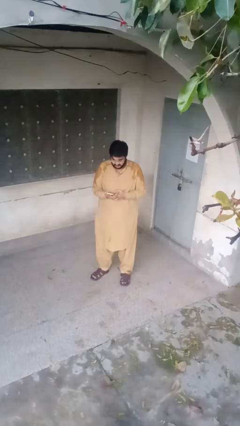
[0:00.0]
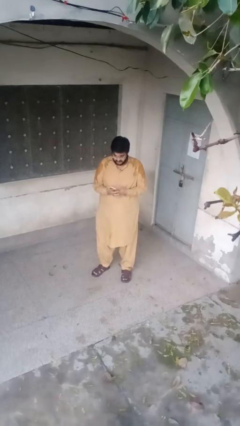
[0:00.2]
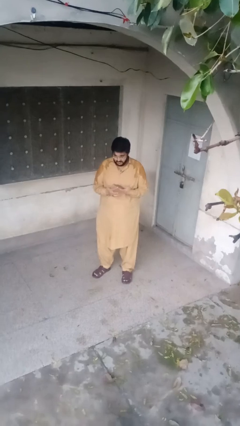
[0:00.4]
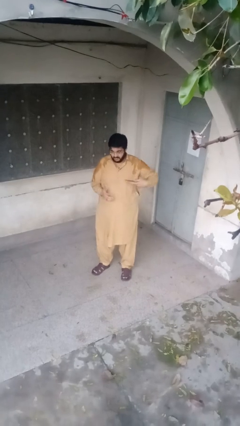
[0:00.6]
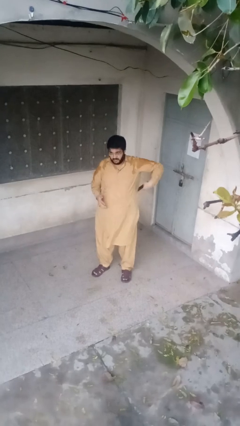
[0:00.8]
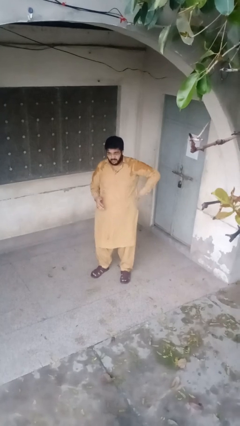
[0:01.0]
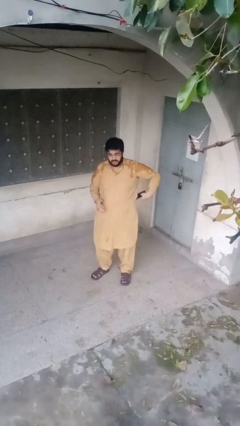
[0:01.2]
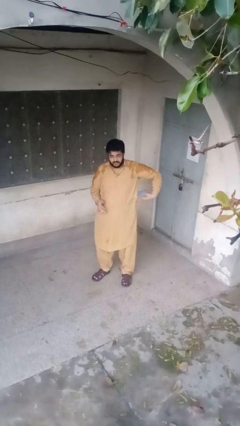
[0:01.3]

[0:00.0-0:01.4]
person puts phone into pocket

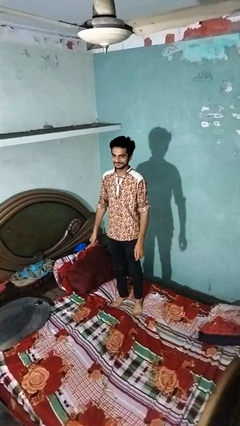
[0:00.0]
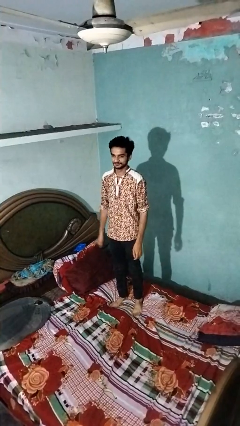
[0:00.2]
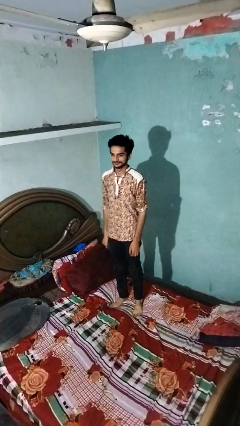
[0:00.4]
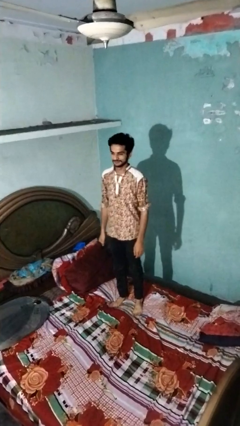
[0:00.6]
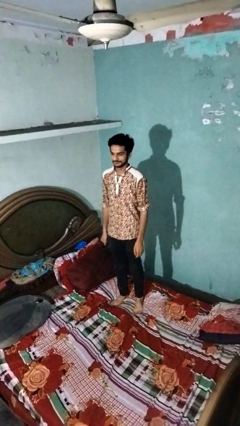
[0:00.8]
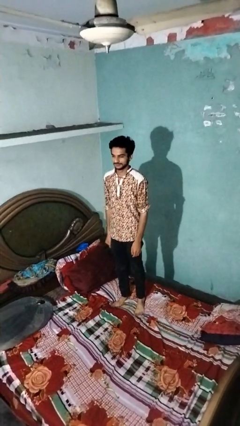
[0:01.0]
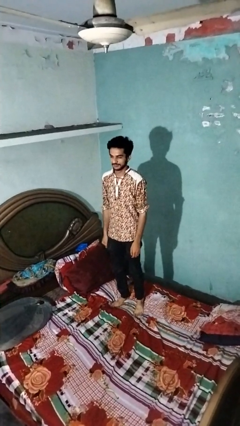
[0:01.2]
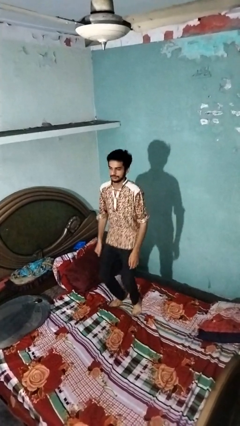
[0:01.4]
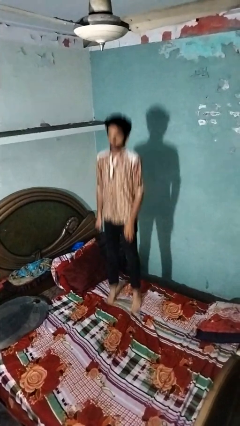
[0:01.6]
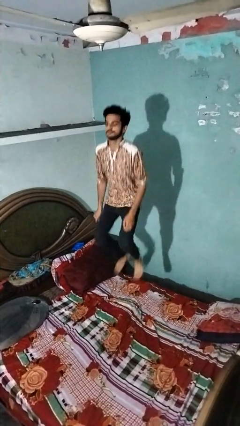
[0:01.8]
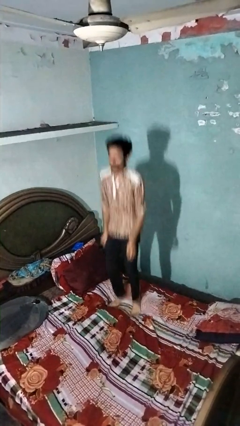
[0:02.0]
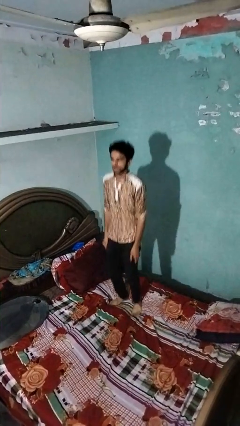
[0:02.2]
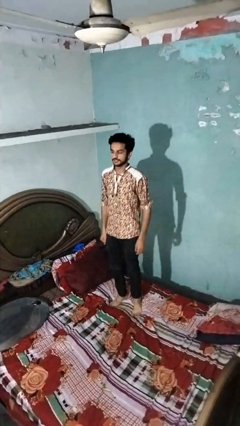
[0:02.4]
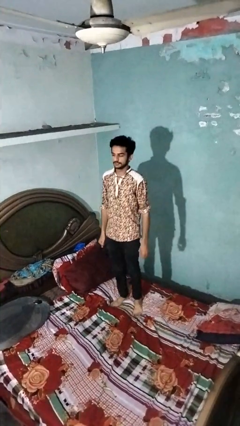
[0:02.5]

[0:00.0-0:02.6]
person jumps on bed

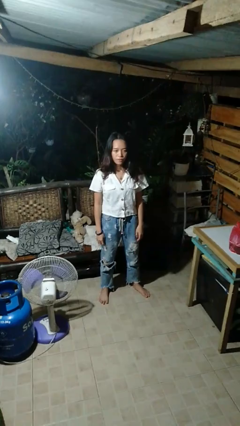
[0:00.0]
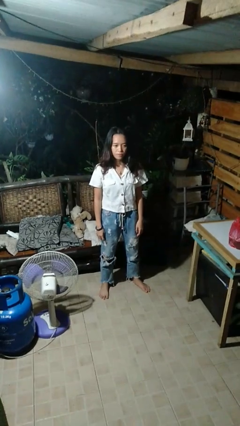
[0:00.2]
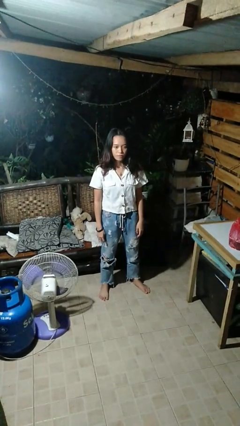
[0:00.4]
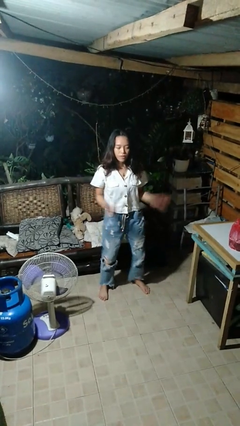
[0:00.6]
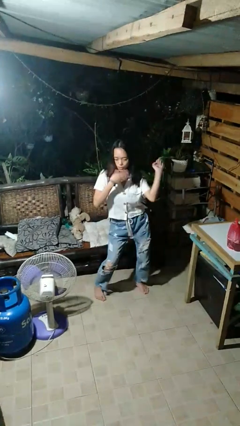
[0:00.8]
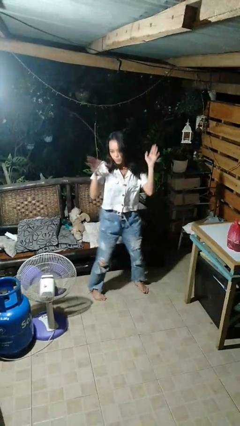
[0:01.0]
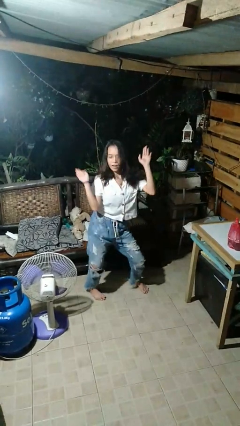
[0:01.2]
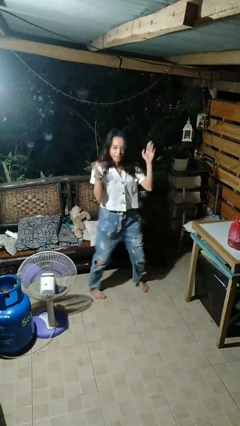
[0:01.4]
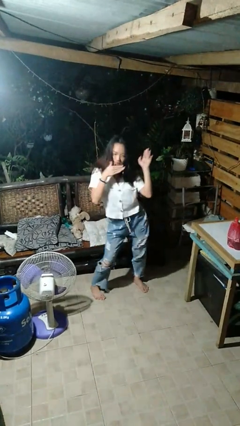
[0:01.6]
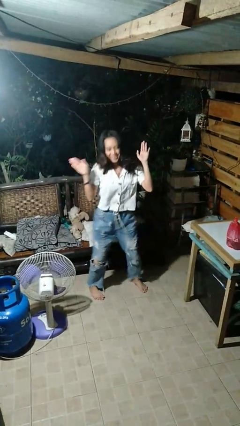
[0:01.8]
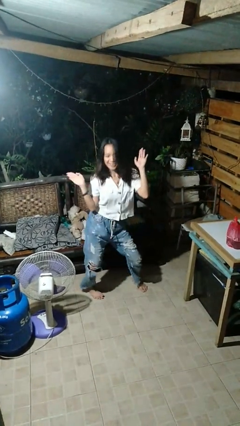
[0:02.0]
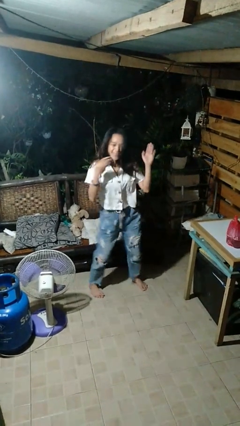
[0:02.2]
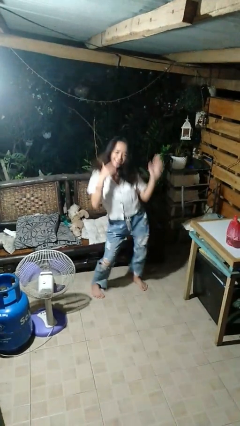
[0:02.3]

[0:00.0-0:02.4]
person dances in place

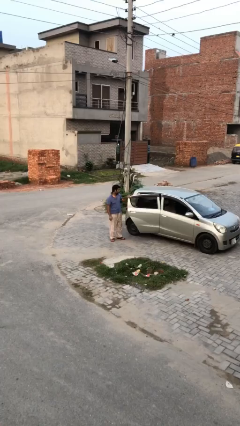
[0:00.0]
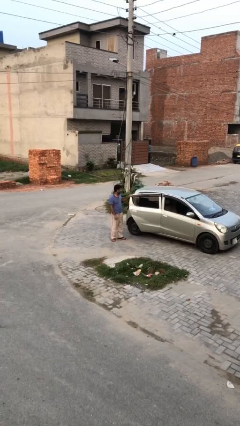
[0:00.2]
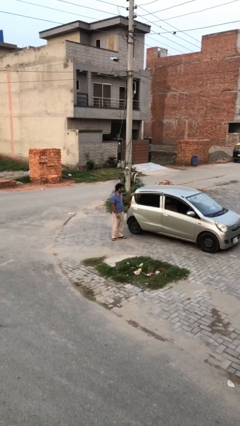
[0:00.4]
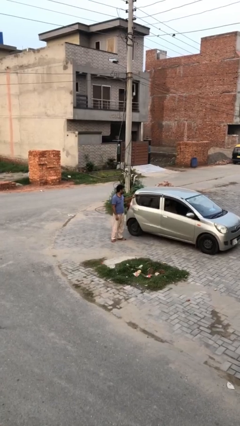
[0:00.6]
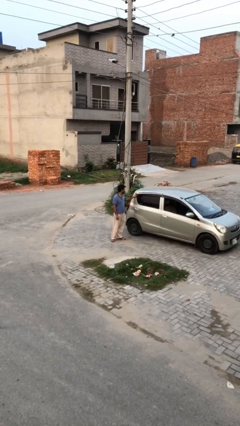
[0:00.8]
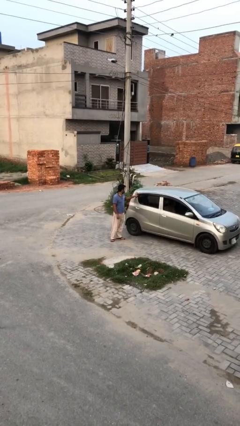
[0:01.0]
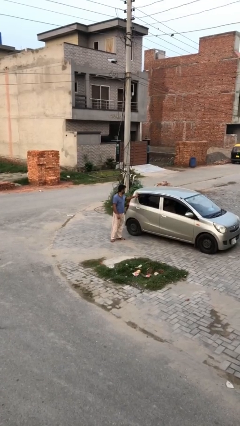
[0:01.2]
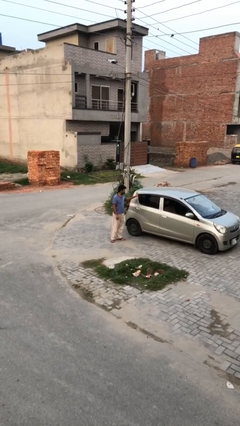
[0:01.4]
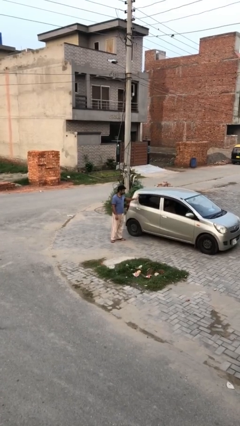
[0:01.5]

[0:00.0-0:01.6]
person closes car door

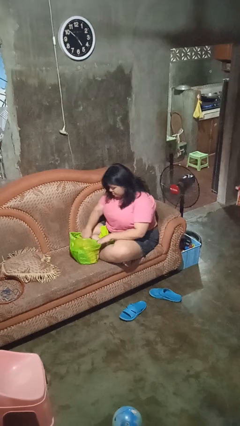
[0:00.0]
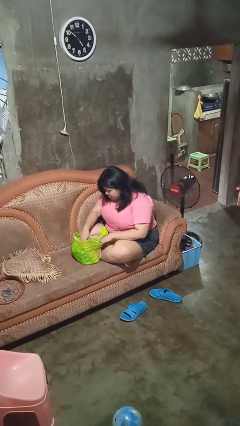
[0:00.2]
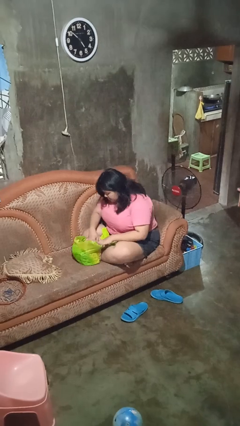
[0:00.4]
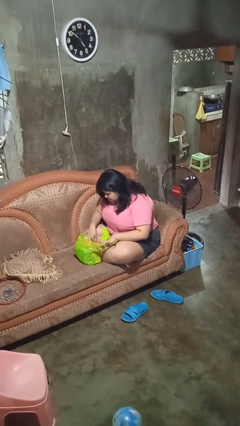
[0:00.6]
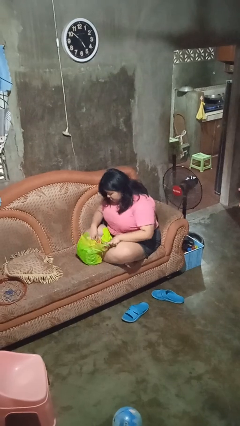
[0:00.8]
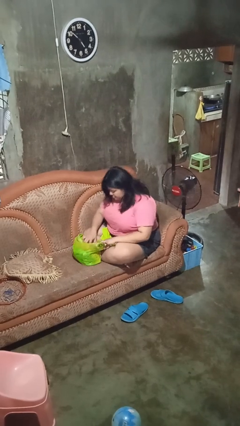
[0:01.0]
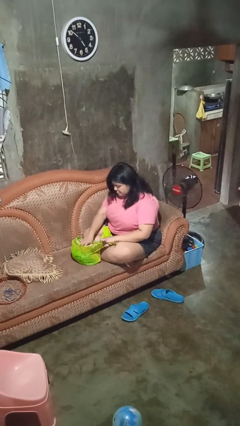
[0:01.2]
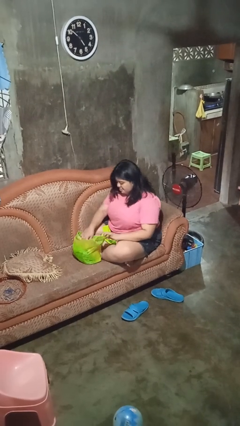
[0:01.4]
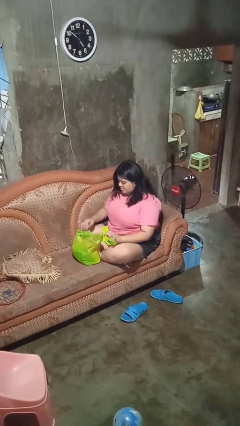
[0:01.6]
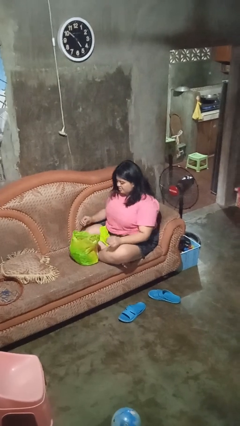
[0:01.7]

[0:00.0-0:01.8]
person searches in bag

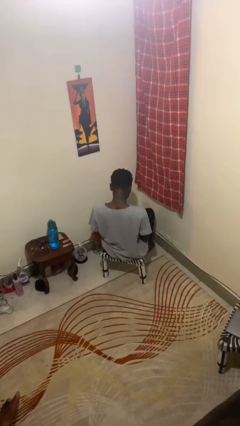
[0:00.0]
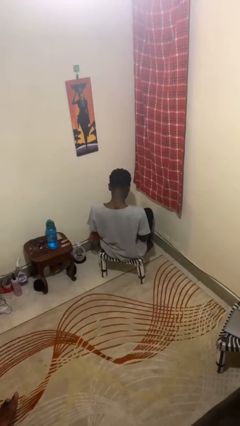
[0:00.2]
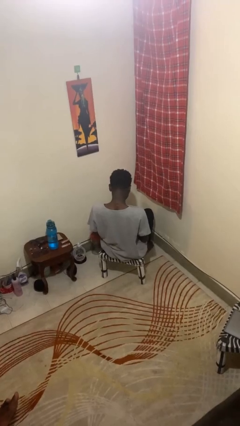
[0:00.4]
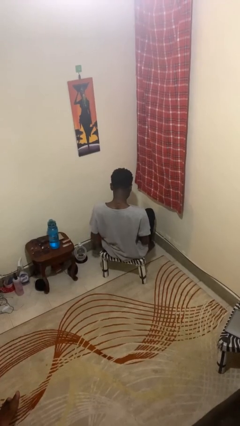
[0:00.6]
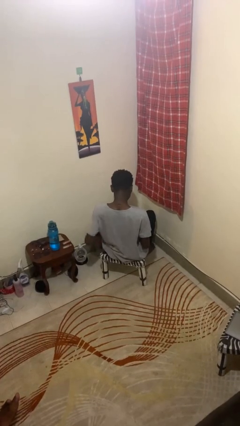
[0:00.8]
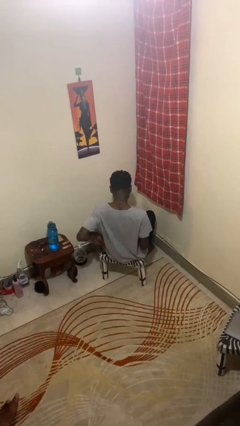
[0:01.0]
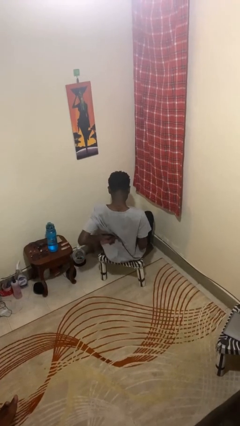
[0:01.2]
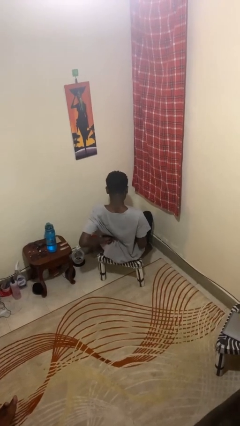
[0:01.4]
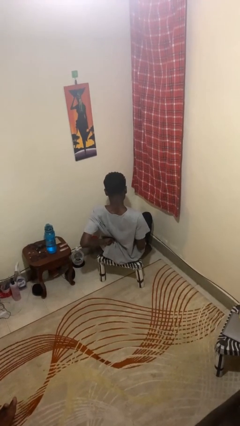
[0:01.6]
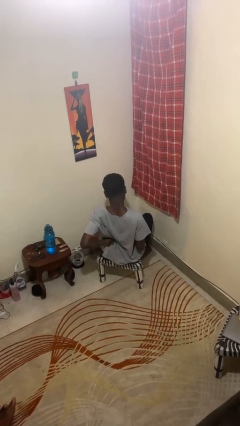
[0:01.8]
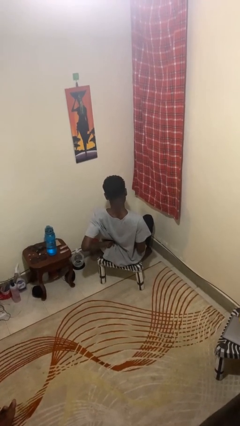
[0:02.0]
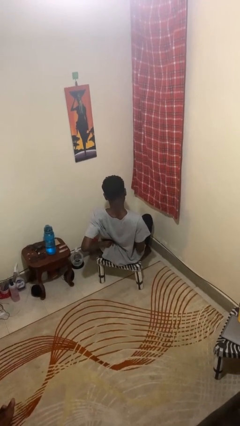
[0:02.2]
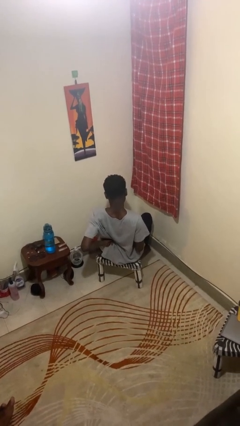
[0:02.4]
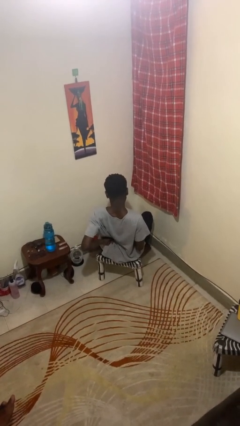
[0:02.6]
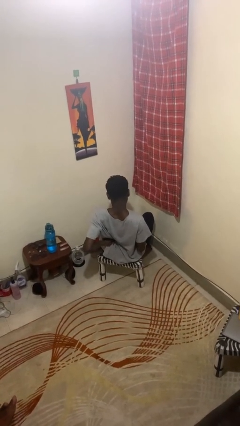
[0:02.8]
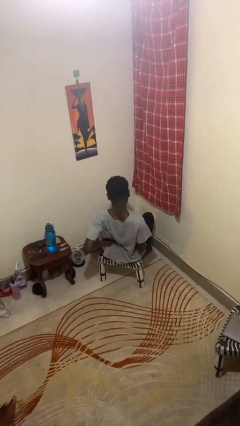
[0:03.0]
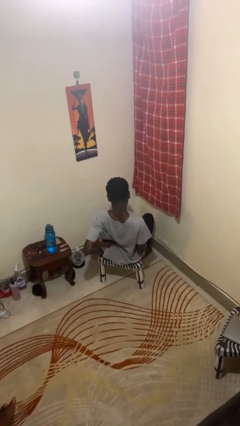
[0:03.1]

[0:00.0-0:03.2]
person stretches back

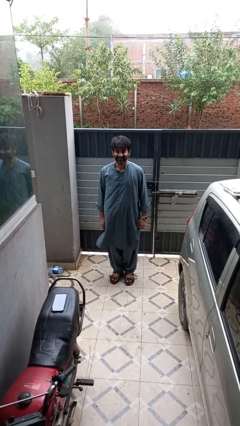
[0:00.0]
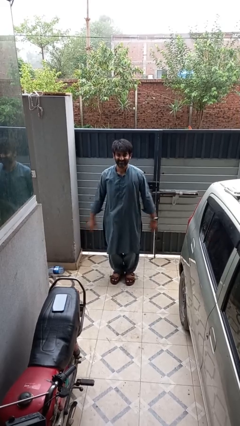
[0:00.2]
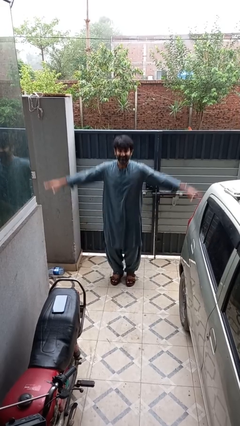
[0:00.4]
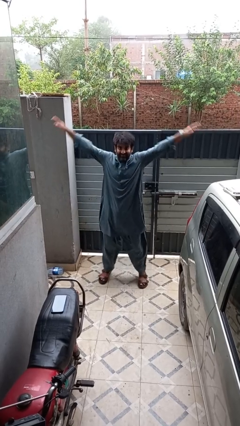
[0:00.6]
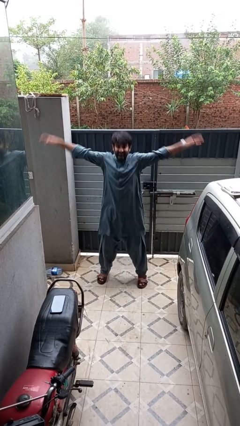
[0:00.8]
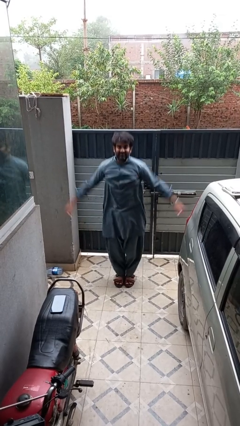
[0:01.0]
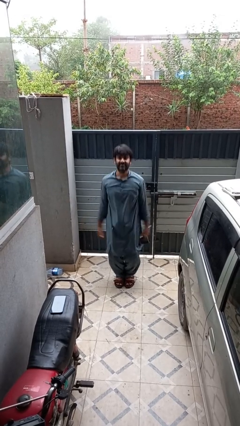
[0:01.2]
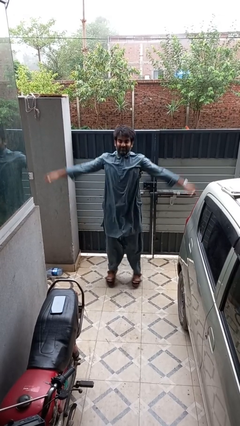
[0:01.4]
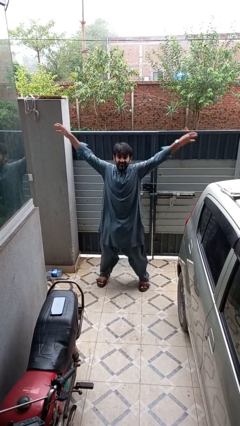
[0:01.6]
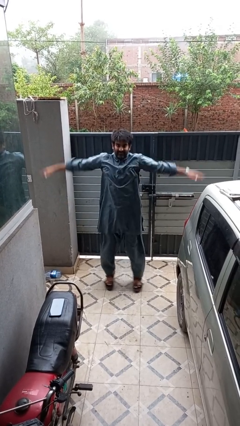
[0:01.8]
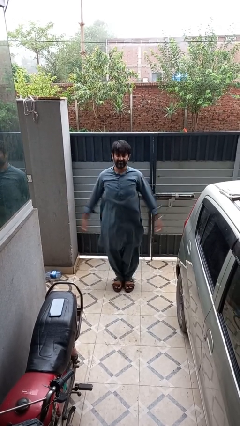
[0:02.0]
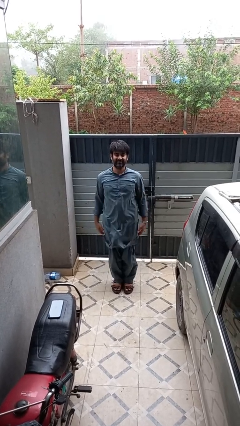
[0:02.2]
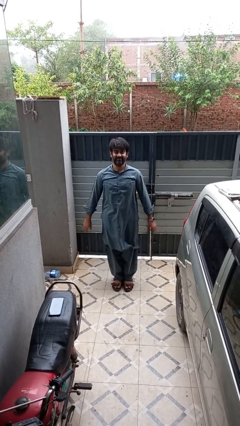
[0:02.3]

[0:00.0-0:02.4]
person exercises with jumping jacks

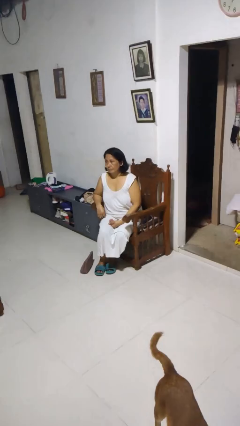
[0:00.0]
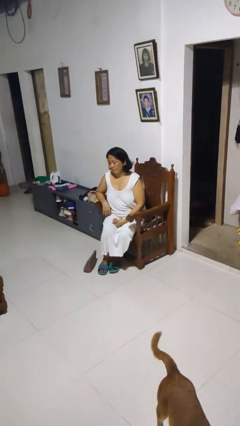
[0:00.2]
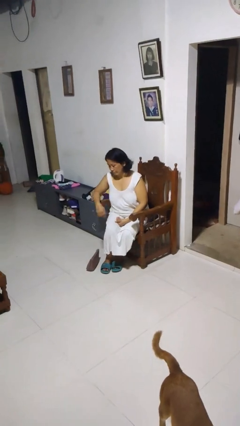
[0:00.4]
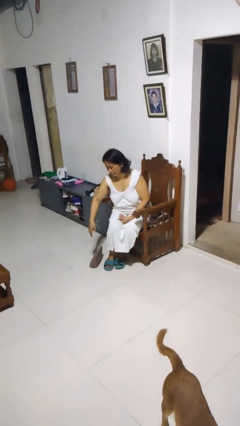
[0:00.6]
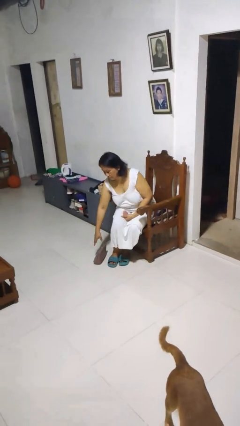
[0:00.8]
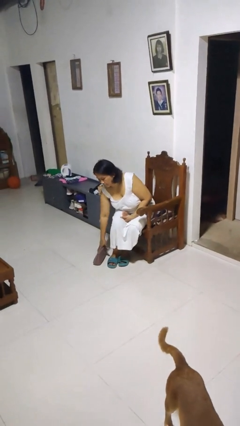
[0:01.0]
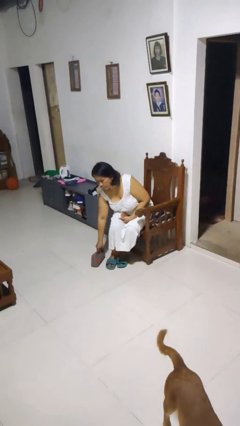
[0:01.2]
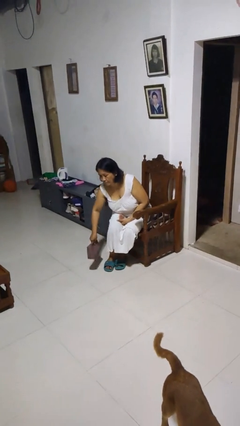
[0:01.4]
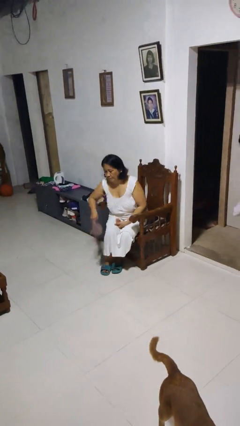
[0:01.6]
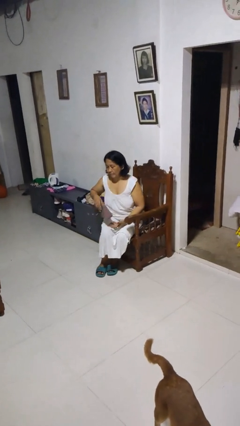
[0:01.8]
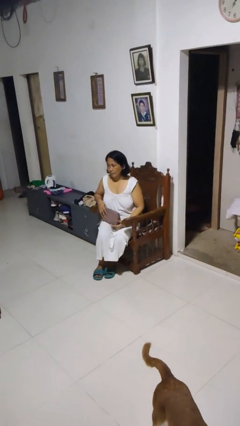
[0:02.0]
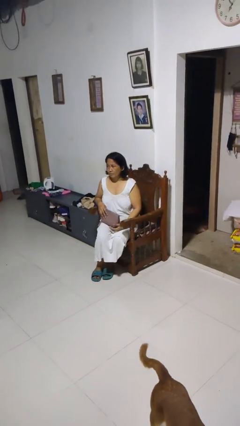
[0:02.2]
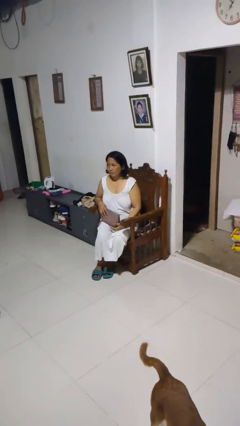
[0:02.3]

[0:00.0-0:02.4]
person picks up object from floor
